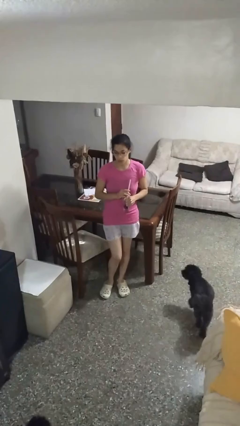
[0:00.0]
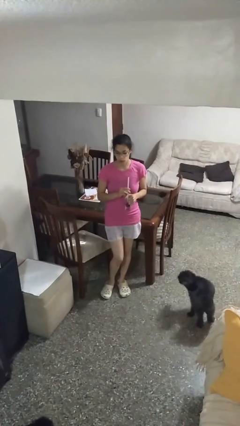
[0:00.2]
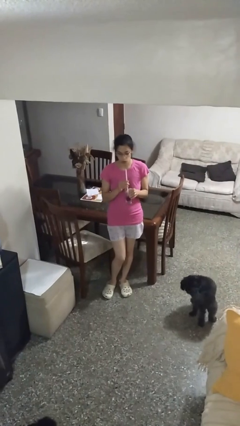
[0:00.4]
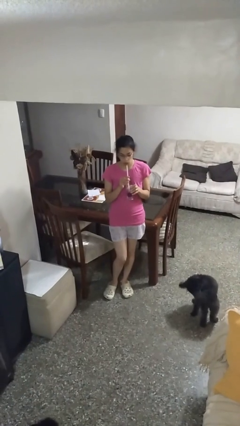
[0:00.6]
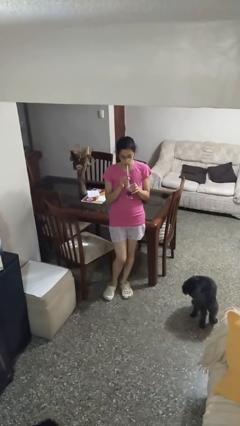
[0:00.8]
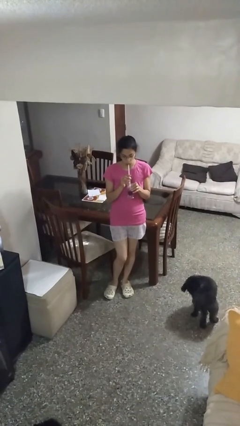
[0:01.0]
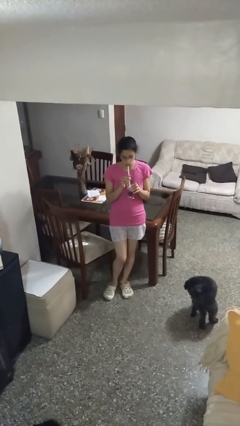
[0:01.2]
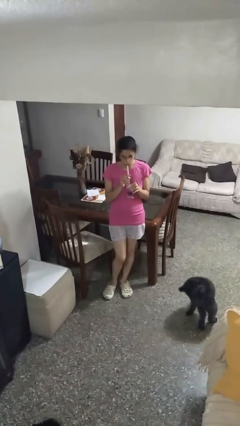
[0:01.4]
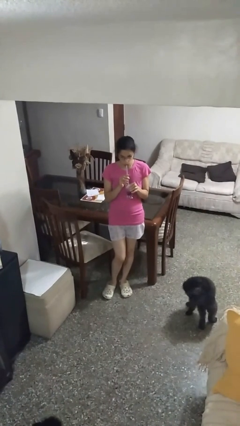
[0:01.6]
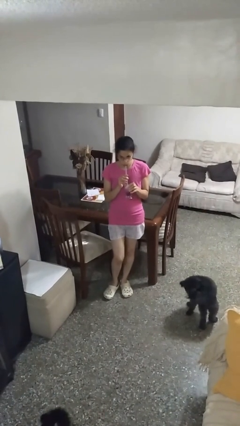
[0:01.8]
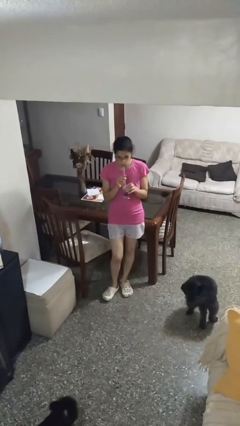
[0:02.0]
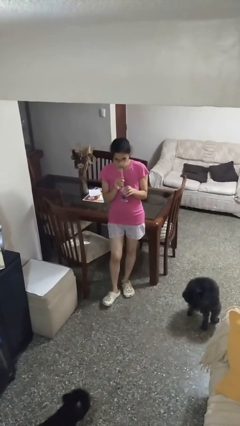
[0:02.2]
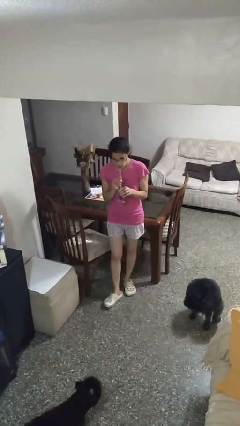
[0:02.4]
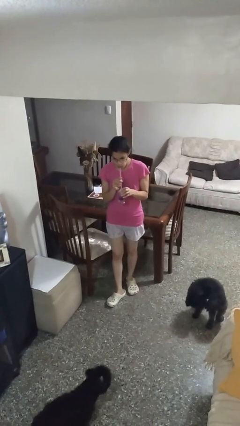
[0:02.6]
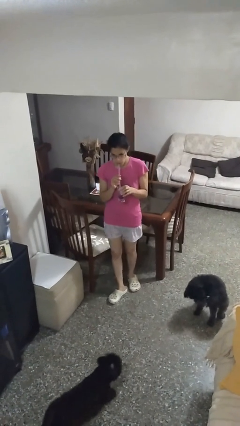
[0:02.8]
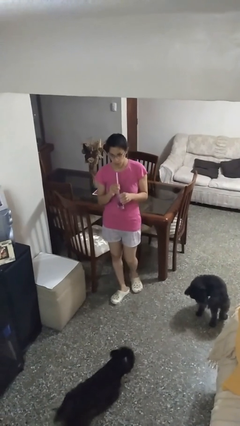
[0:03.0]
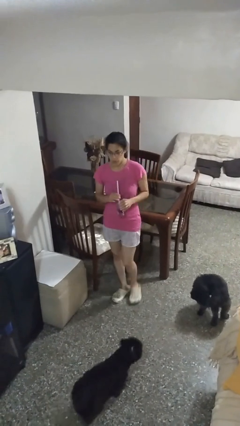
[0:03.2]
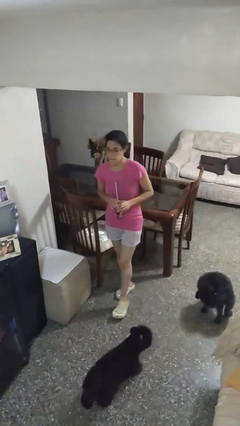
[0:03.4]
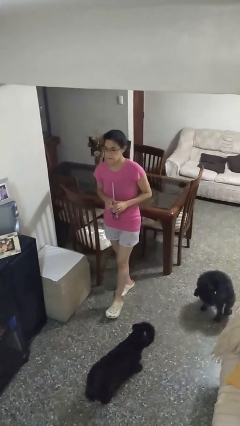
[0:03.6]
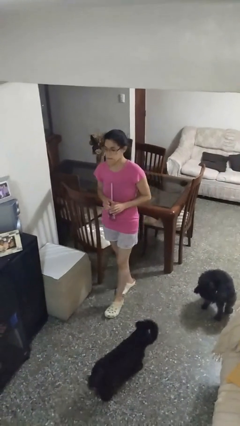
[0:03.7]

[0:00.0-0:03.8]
person drinks from straw

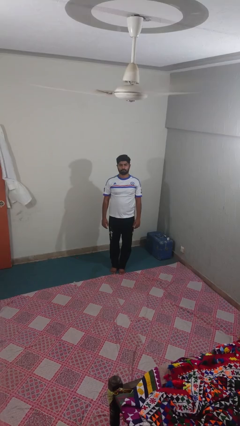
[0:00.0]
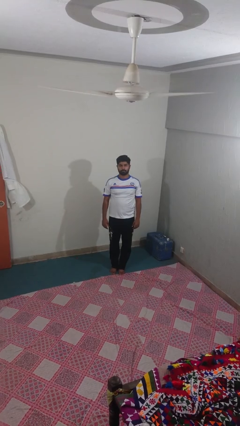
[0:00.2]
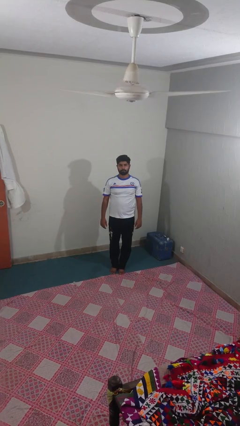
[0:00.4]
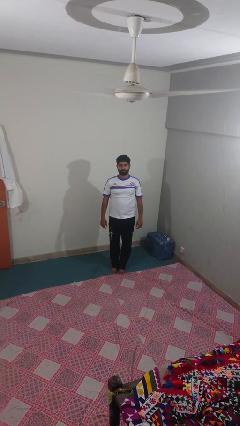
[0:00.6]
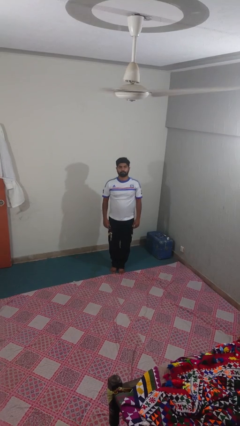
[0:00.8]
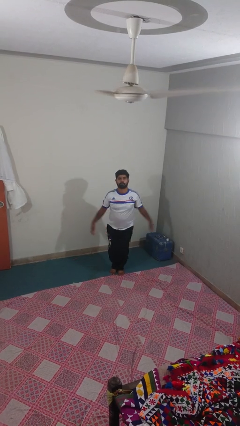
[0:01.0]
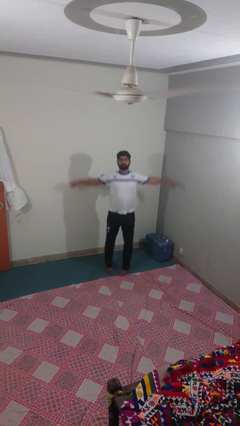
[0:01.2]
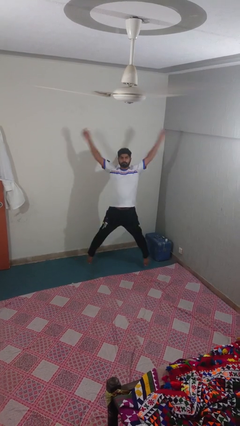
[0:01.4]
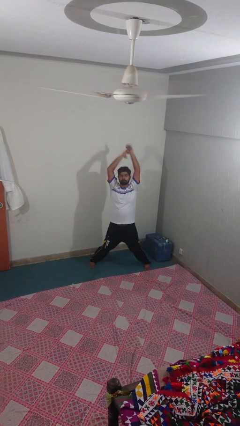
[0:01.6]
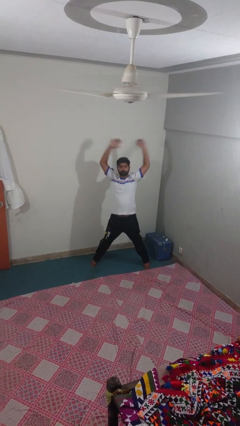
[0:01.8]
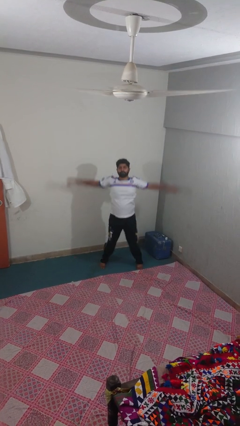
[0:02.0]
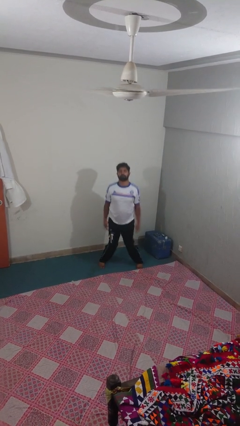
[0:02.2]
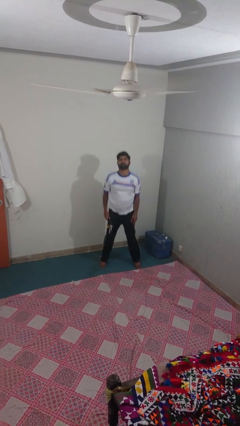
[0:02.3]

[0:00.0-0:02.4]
person exercises with jumping jacks

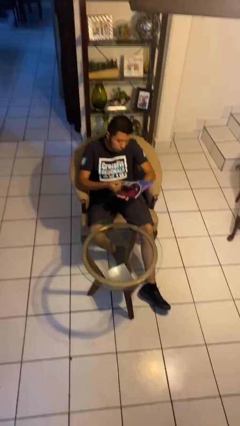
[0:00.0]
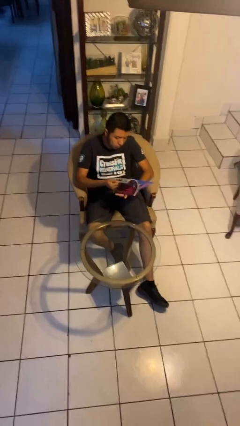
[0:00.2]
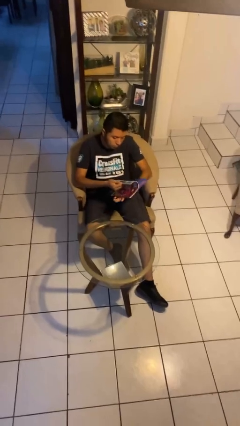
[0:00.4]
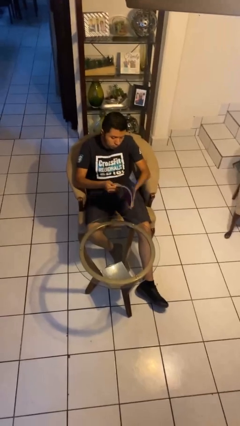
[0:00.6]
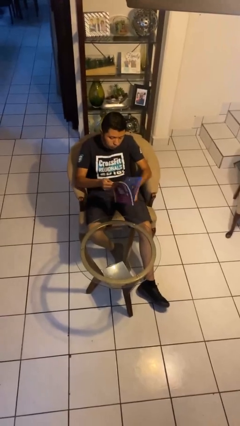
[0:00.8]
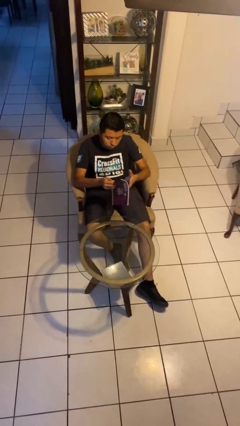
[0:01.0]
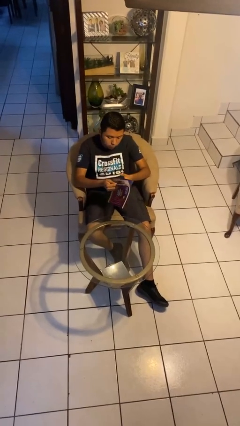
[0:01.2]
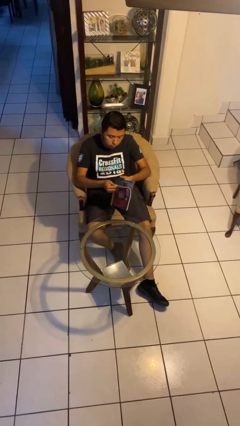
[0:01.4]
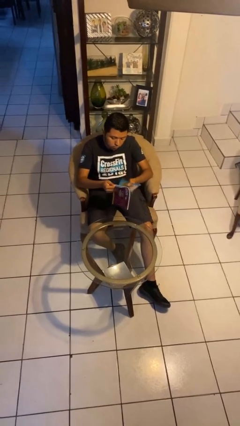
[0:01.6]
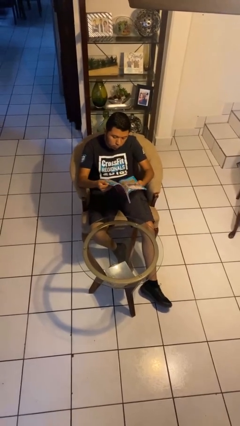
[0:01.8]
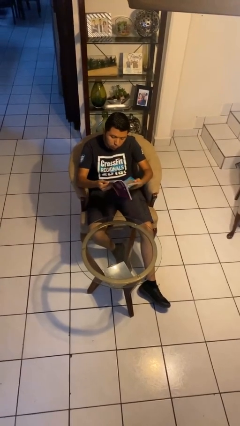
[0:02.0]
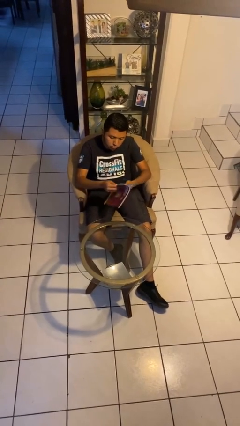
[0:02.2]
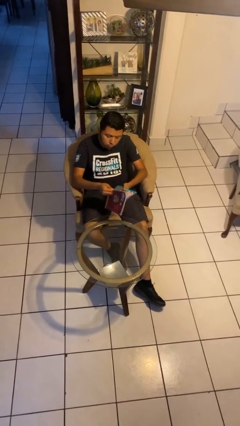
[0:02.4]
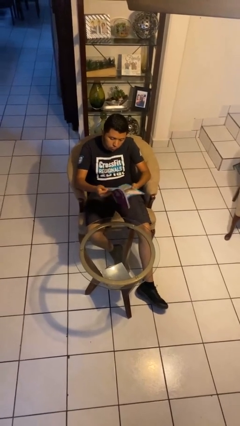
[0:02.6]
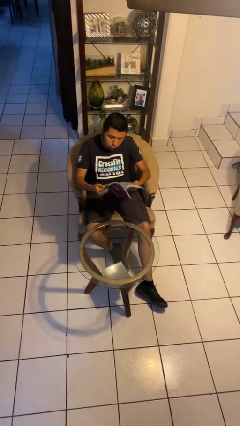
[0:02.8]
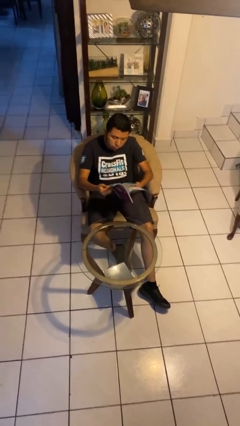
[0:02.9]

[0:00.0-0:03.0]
person reads magazine

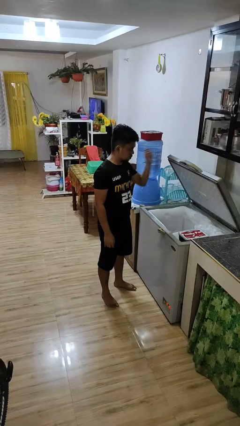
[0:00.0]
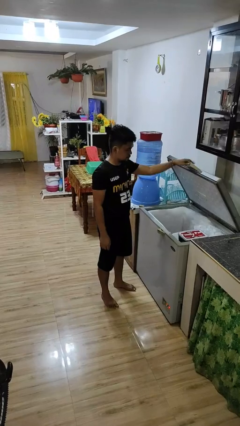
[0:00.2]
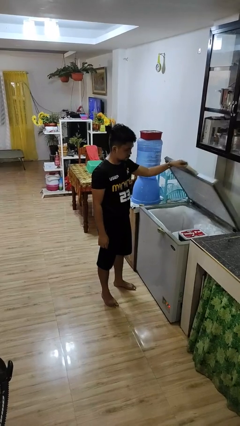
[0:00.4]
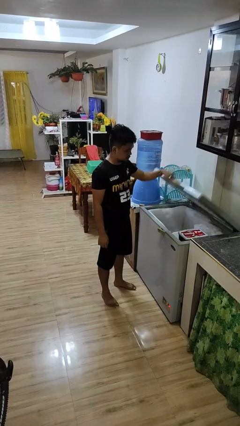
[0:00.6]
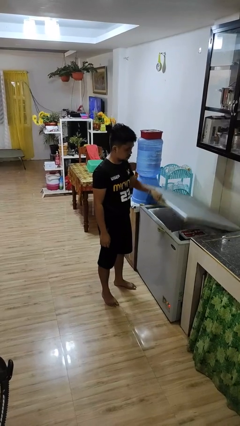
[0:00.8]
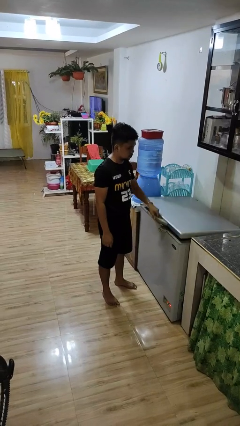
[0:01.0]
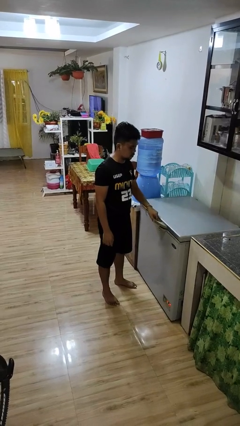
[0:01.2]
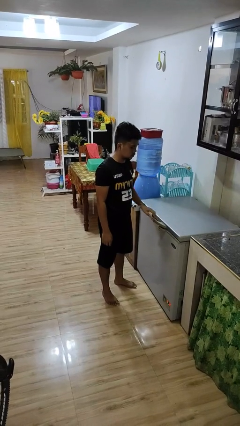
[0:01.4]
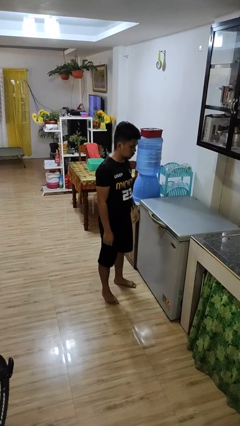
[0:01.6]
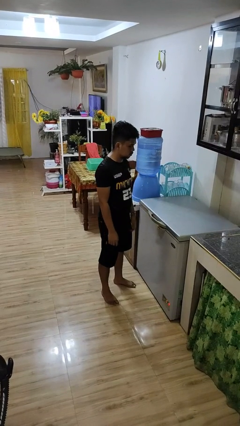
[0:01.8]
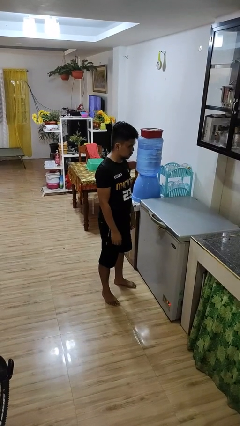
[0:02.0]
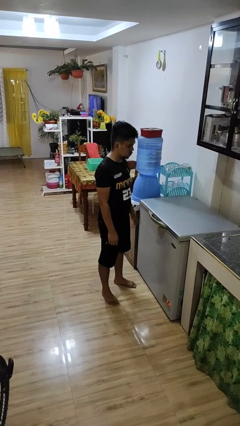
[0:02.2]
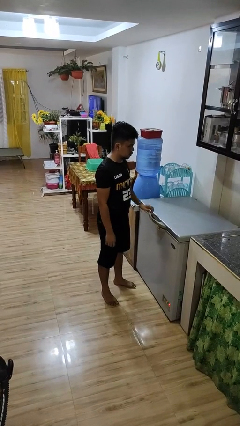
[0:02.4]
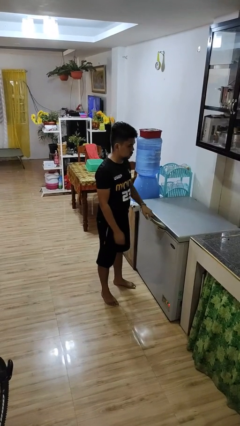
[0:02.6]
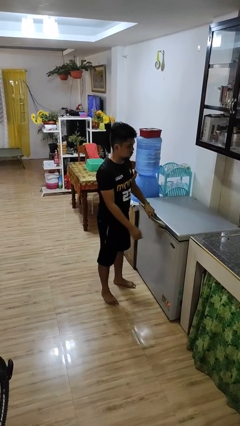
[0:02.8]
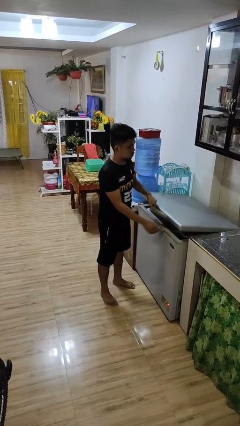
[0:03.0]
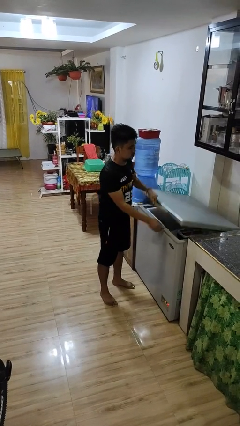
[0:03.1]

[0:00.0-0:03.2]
person closes refrigerator

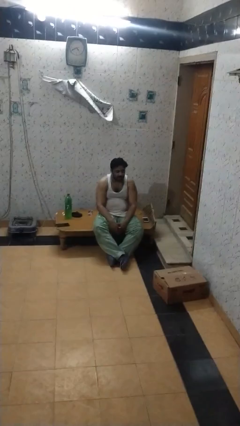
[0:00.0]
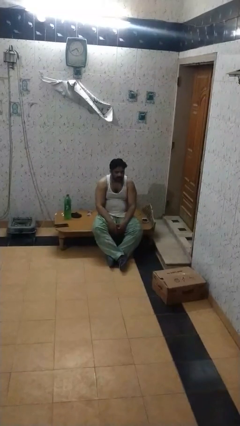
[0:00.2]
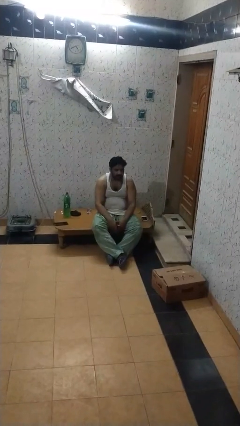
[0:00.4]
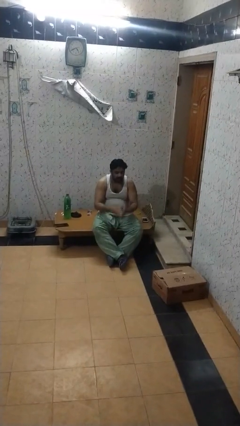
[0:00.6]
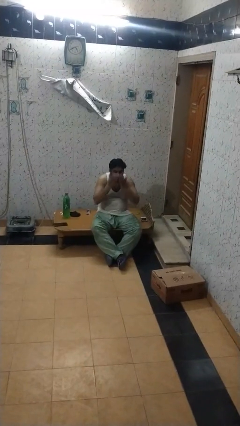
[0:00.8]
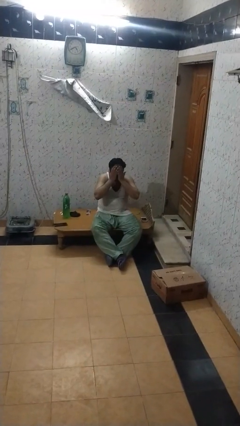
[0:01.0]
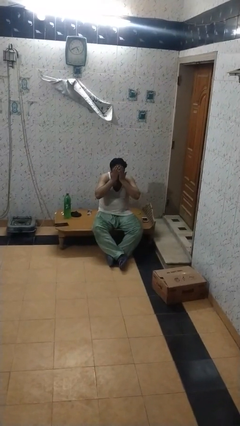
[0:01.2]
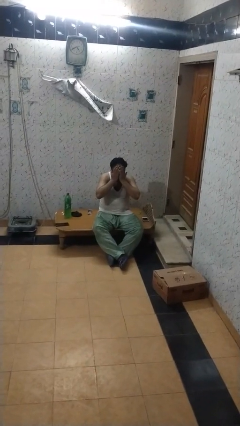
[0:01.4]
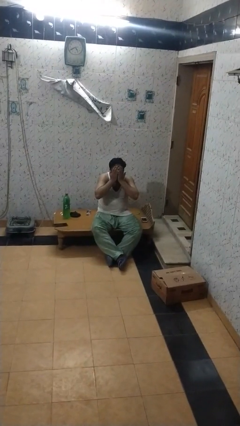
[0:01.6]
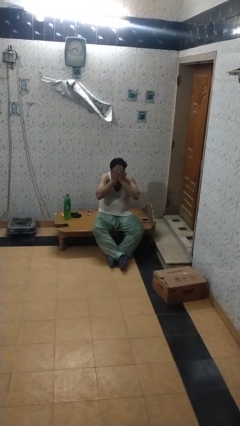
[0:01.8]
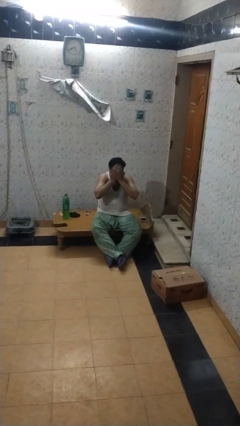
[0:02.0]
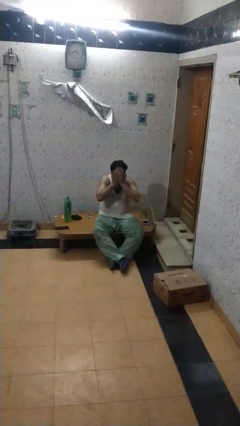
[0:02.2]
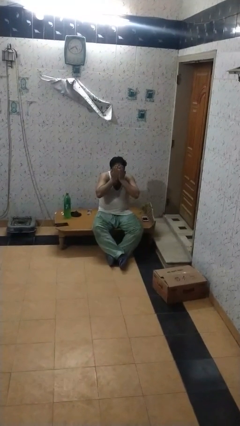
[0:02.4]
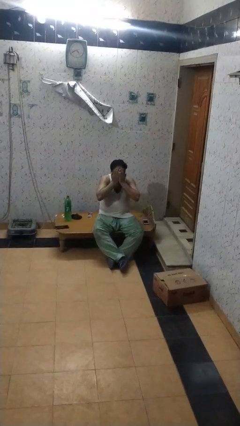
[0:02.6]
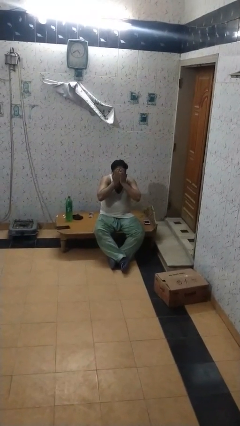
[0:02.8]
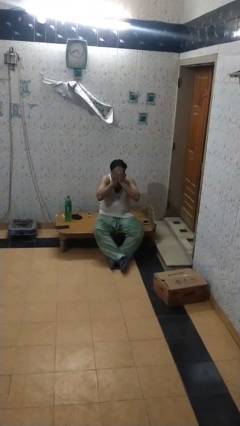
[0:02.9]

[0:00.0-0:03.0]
person covers face with hands

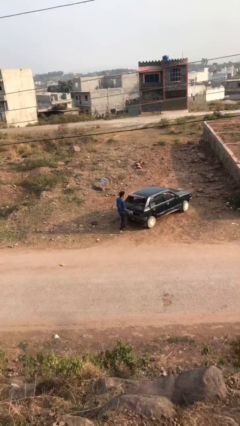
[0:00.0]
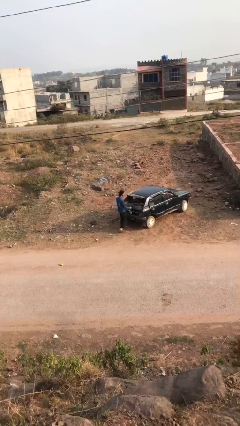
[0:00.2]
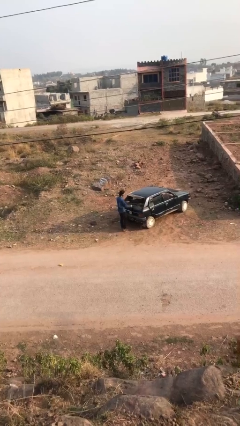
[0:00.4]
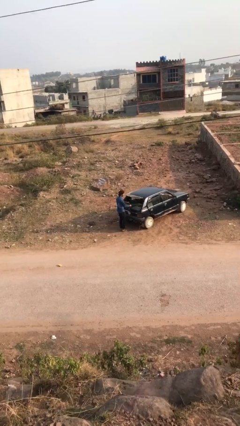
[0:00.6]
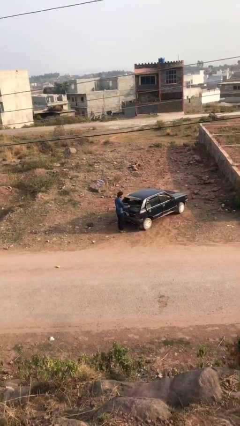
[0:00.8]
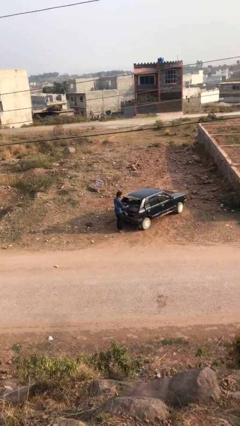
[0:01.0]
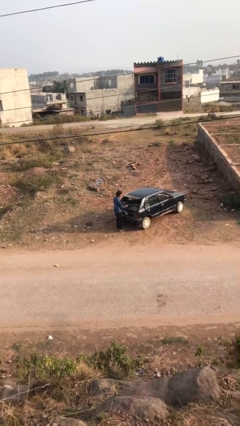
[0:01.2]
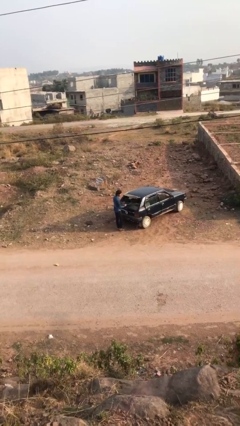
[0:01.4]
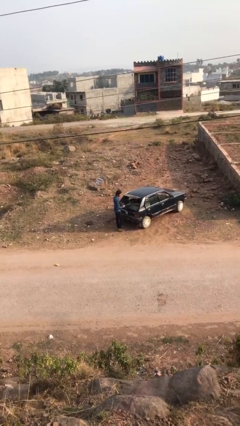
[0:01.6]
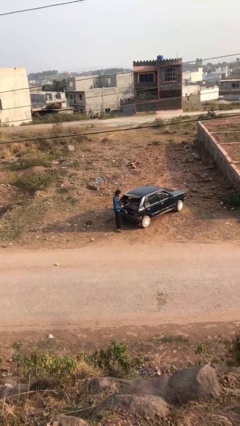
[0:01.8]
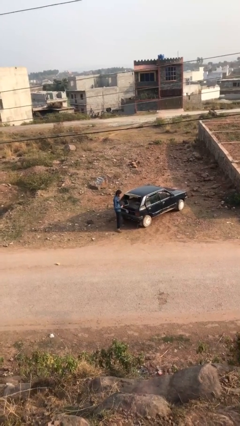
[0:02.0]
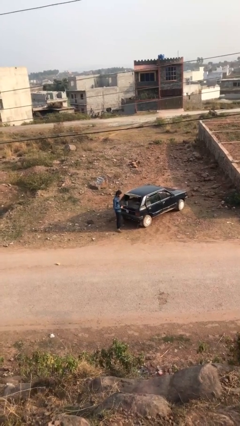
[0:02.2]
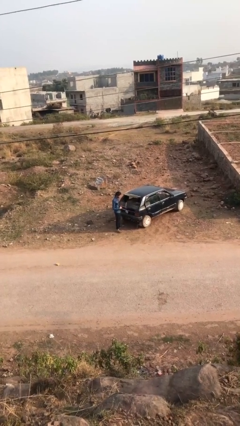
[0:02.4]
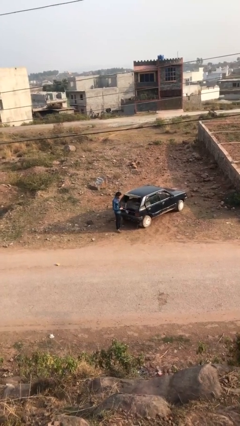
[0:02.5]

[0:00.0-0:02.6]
person unloads car
